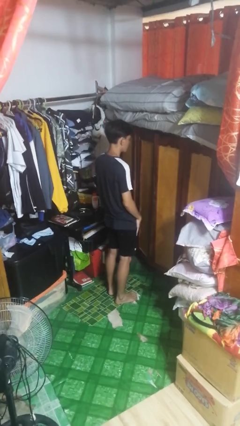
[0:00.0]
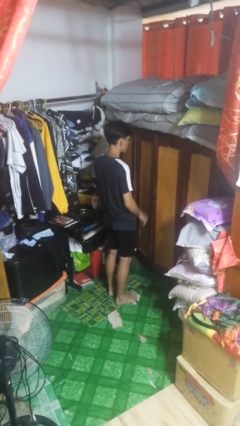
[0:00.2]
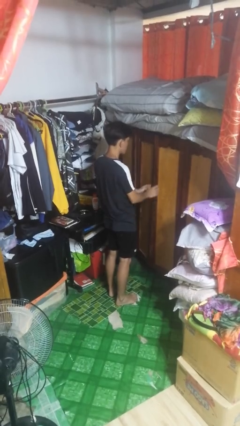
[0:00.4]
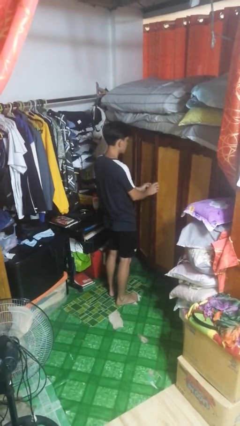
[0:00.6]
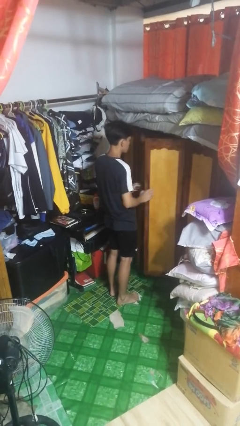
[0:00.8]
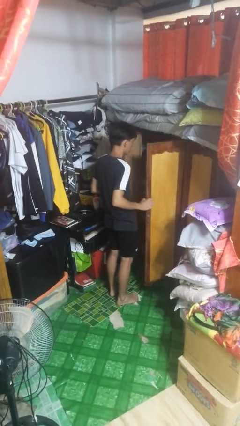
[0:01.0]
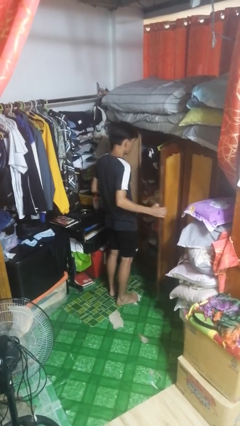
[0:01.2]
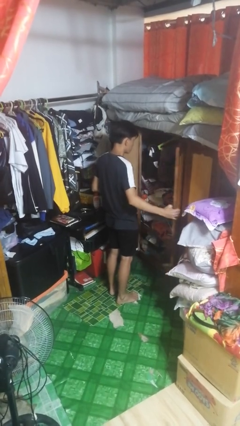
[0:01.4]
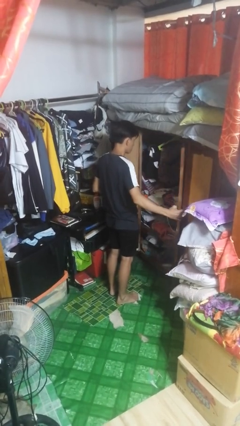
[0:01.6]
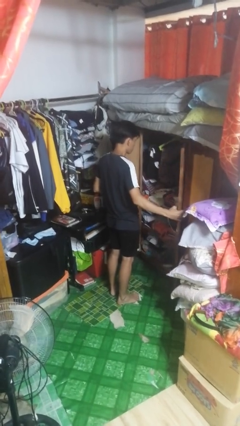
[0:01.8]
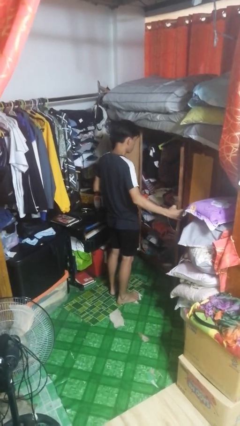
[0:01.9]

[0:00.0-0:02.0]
person opens dresser drawer

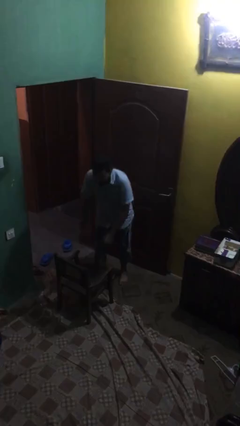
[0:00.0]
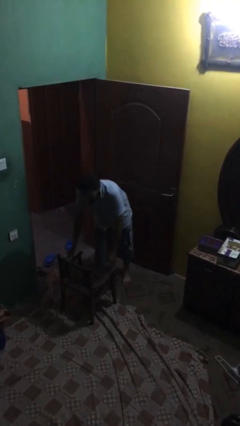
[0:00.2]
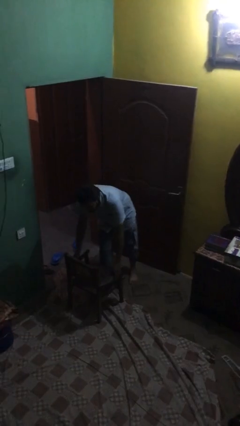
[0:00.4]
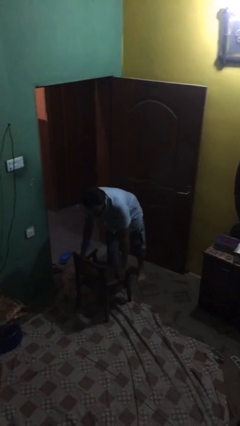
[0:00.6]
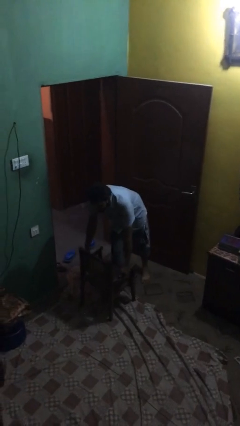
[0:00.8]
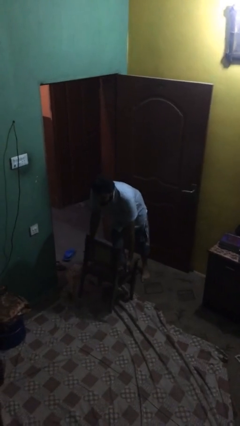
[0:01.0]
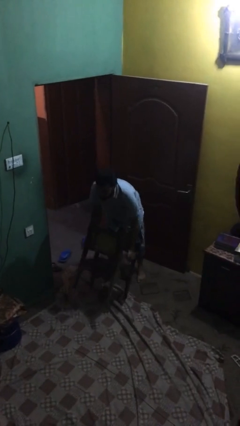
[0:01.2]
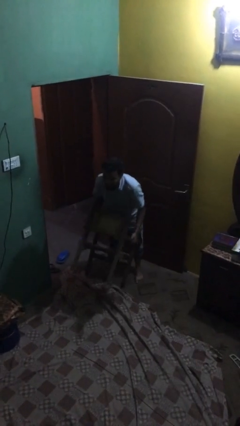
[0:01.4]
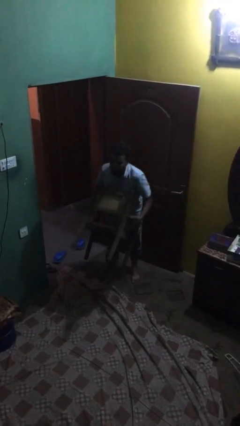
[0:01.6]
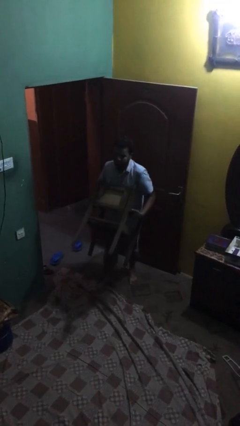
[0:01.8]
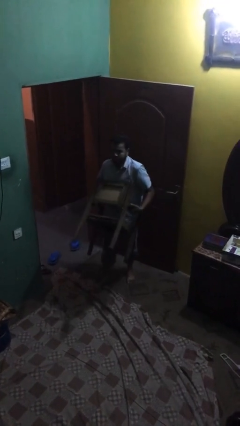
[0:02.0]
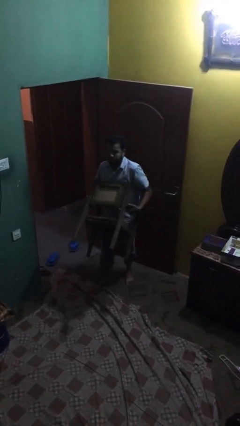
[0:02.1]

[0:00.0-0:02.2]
person picks up object from floor

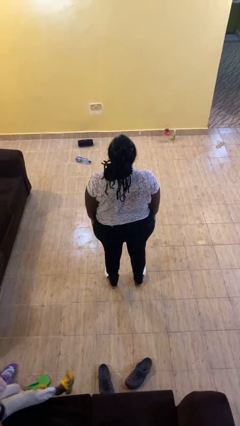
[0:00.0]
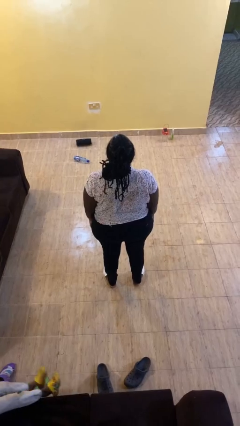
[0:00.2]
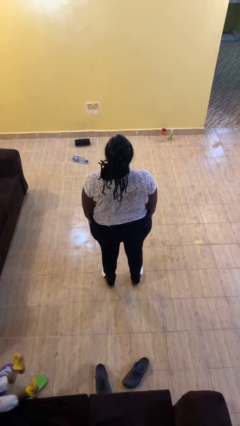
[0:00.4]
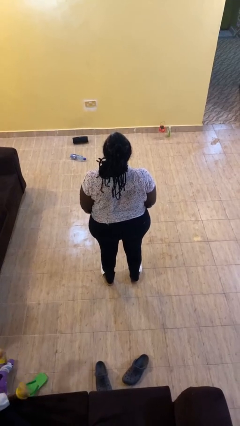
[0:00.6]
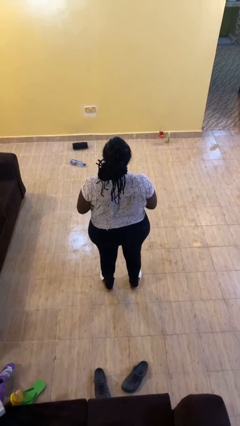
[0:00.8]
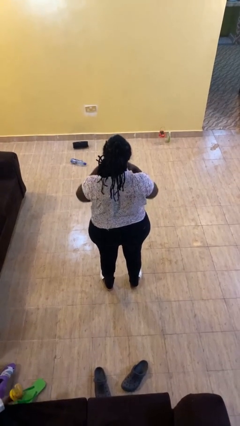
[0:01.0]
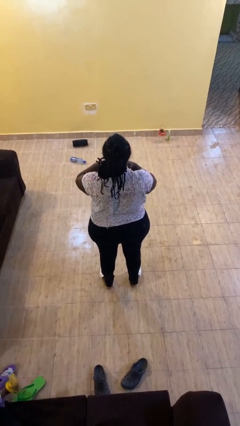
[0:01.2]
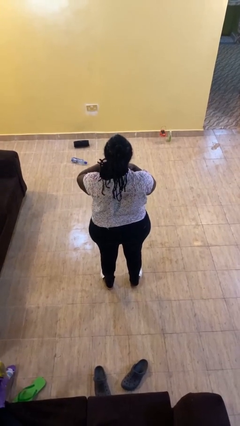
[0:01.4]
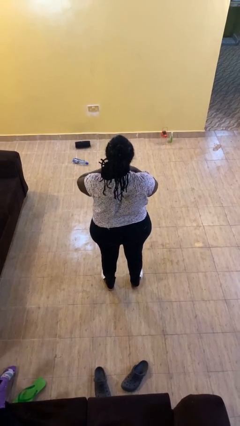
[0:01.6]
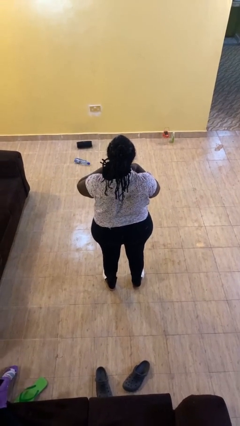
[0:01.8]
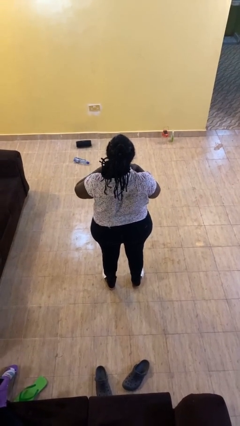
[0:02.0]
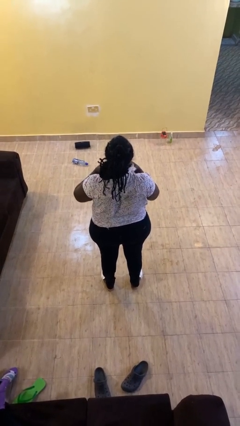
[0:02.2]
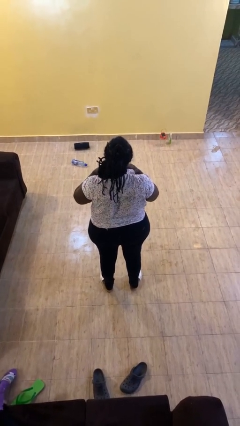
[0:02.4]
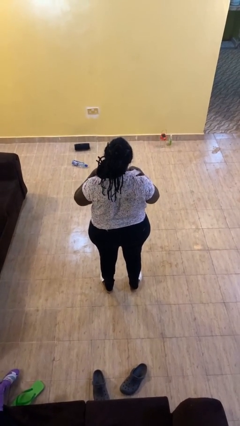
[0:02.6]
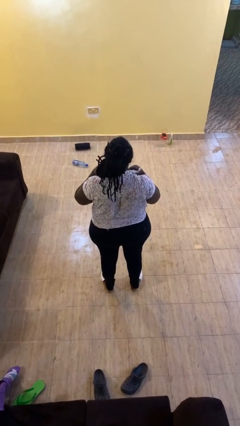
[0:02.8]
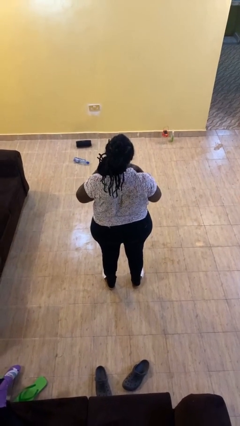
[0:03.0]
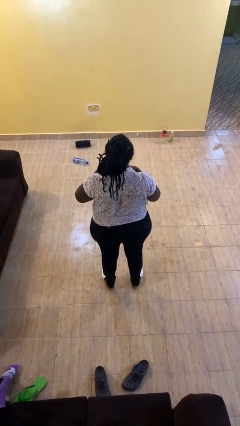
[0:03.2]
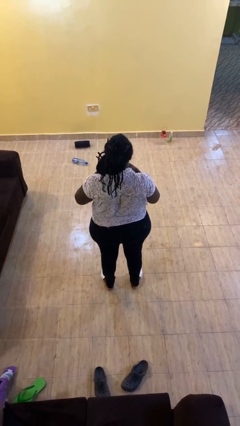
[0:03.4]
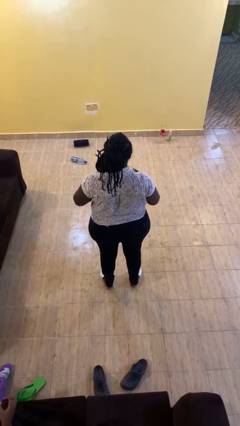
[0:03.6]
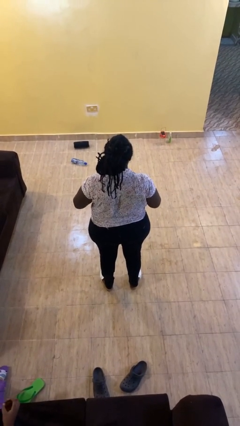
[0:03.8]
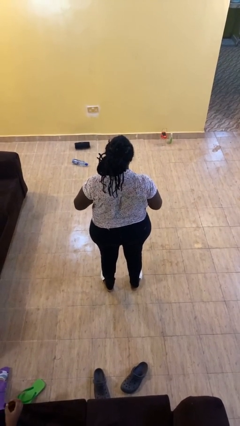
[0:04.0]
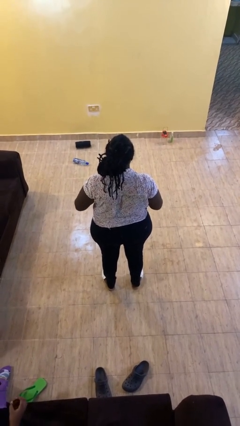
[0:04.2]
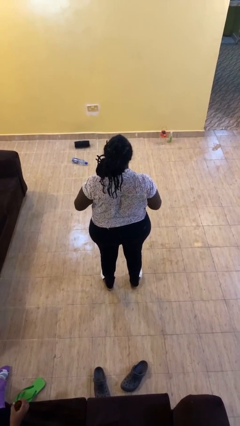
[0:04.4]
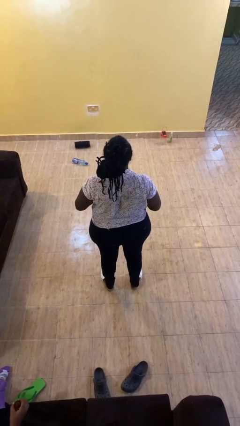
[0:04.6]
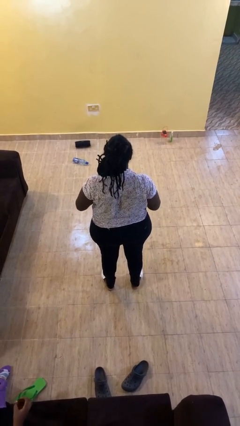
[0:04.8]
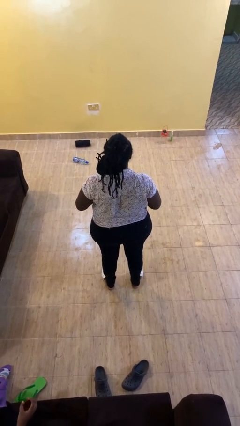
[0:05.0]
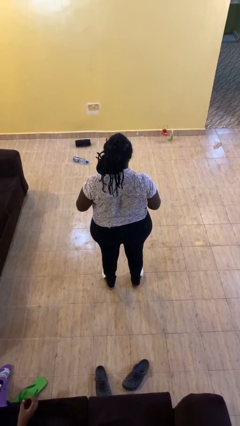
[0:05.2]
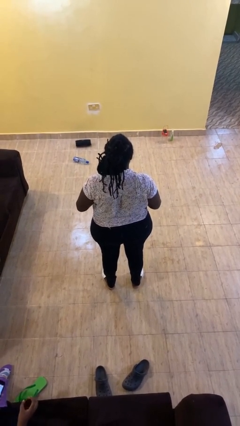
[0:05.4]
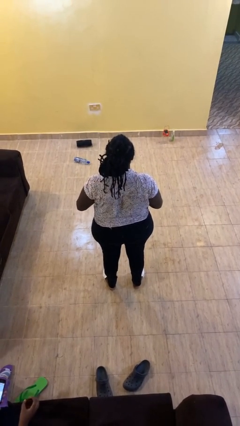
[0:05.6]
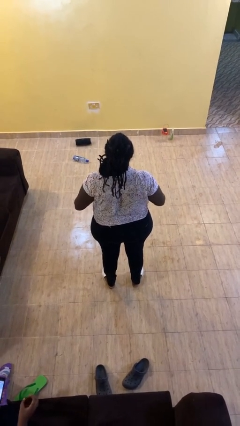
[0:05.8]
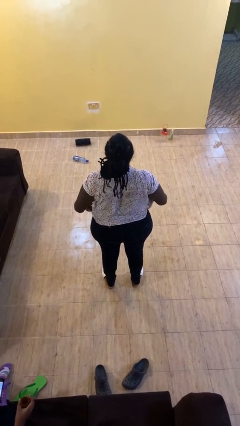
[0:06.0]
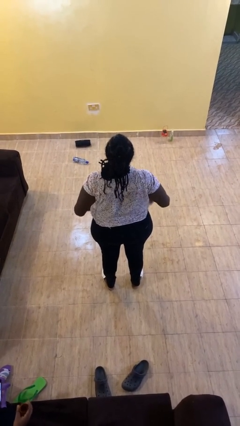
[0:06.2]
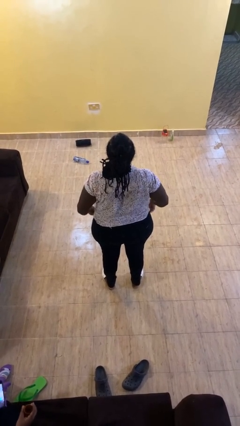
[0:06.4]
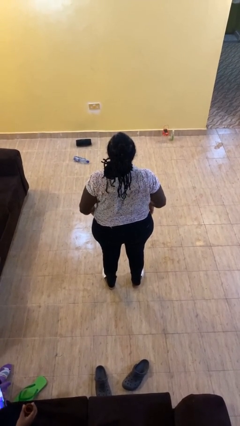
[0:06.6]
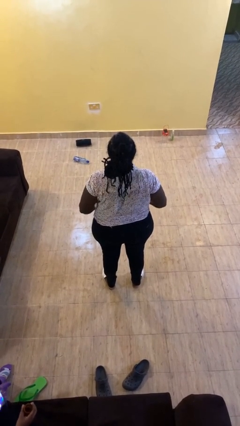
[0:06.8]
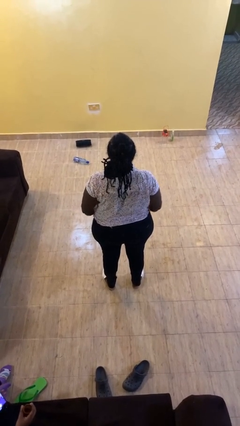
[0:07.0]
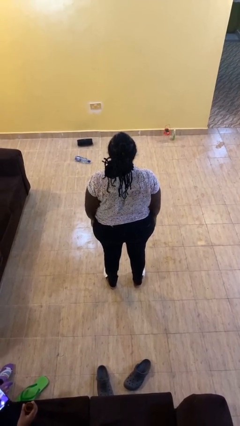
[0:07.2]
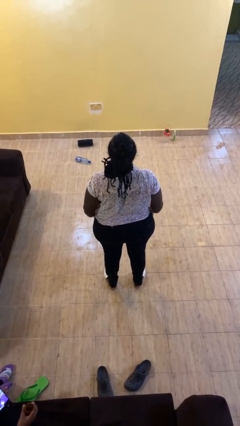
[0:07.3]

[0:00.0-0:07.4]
person unbuttons shirt

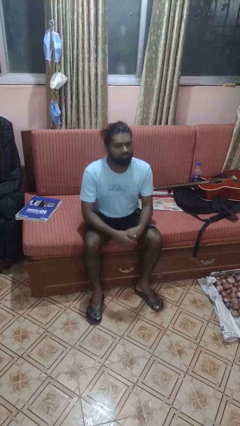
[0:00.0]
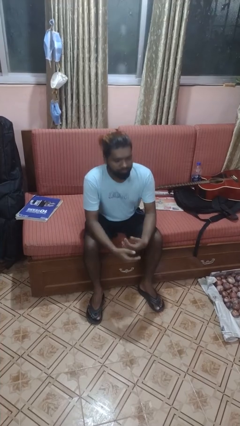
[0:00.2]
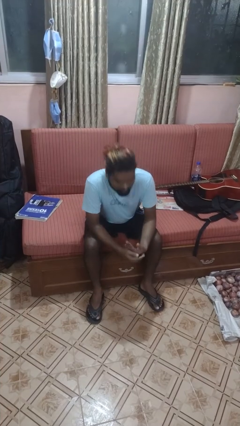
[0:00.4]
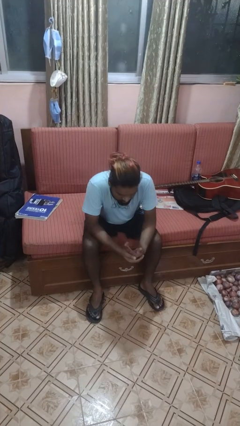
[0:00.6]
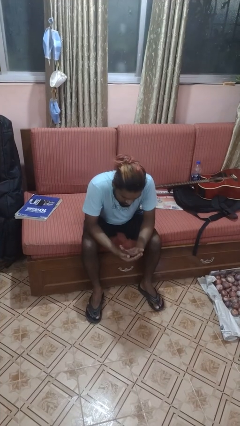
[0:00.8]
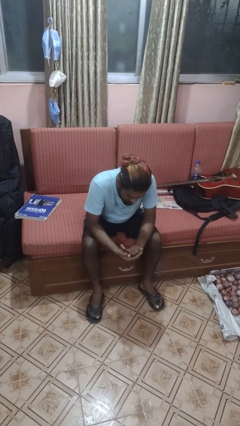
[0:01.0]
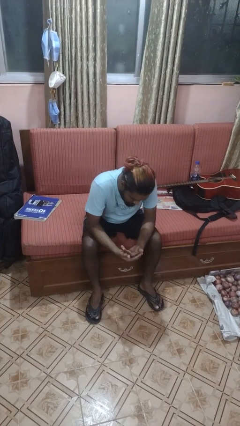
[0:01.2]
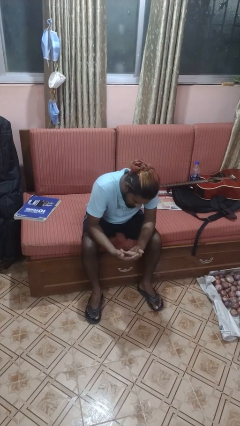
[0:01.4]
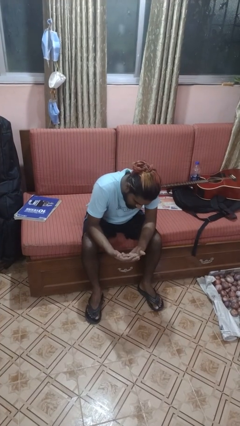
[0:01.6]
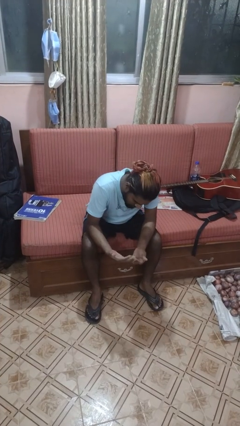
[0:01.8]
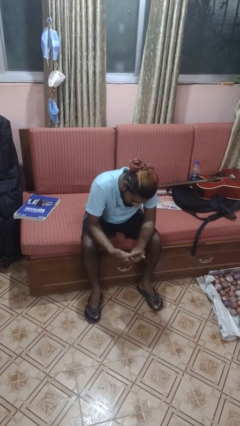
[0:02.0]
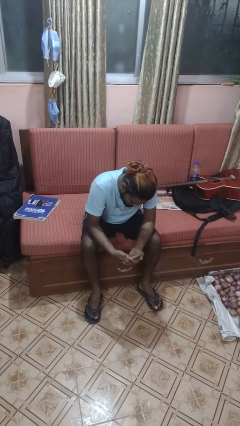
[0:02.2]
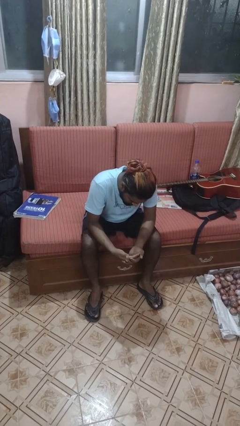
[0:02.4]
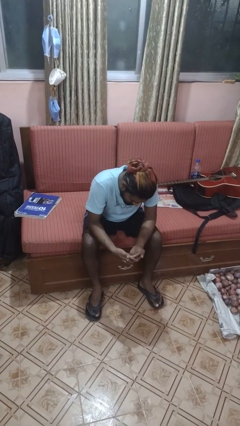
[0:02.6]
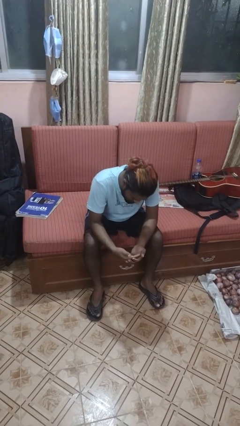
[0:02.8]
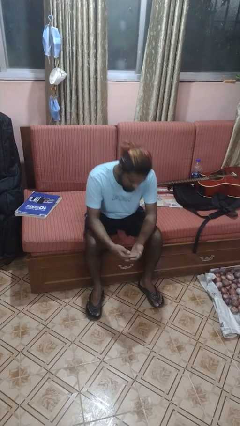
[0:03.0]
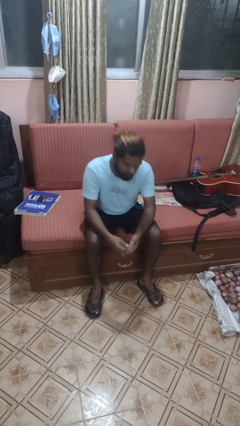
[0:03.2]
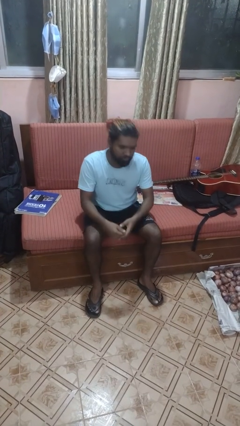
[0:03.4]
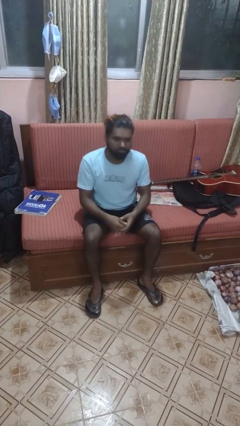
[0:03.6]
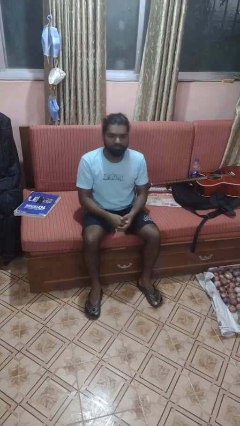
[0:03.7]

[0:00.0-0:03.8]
person looks at hands in lap

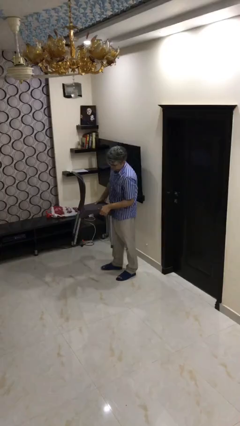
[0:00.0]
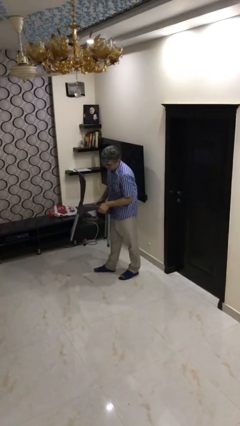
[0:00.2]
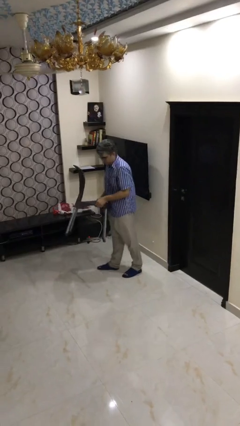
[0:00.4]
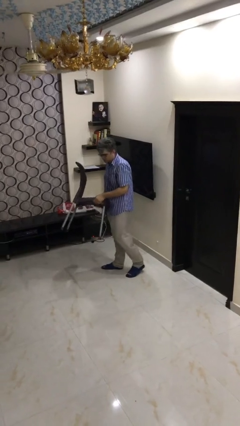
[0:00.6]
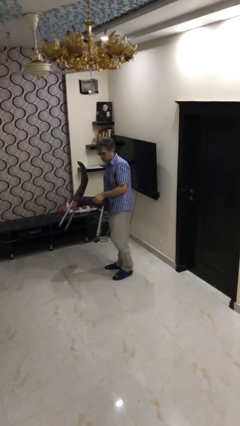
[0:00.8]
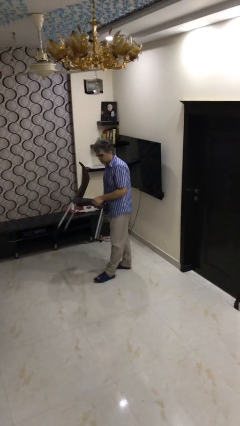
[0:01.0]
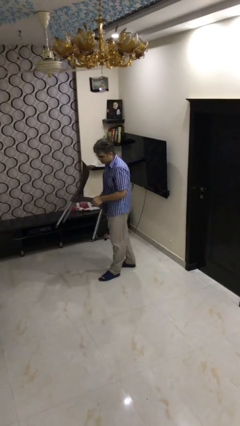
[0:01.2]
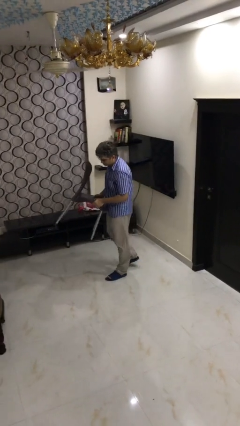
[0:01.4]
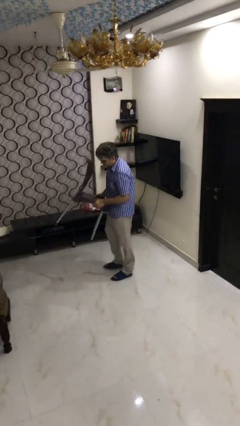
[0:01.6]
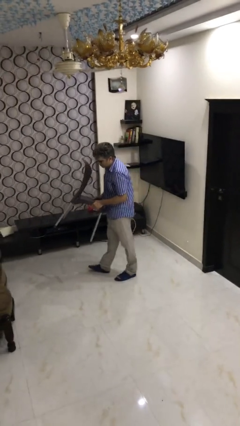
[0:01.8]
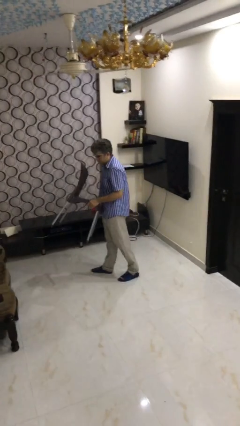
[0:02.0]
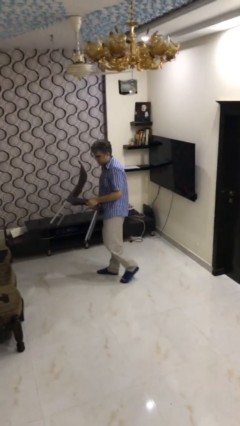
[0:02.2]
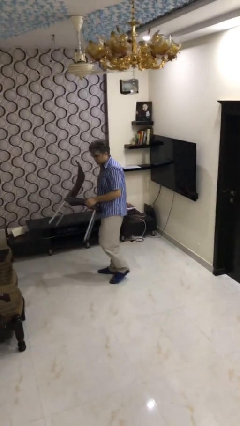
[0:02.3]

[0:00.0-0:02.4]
person carries heavy object
